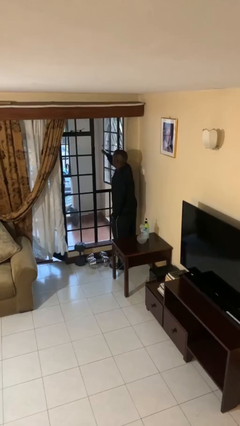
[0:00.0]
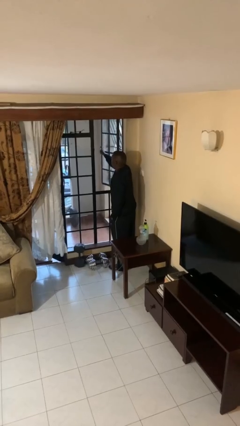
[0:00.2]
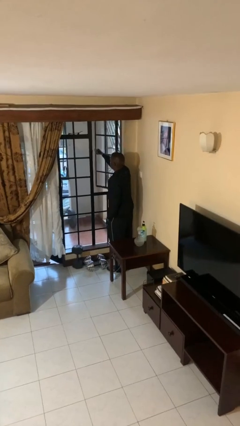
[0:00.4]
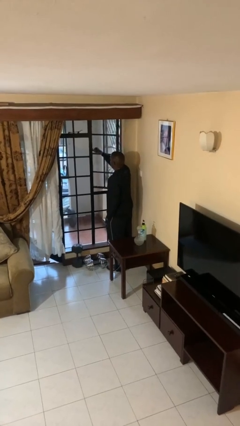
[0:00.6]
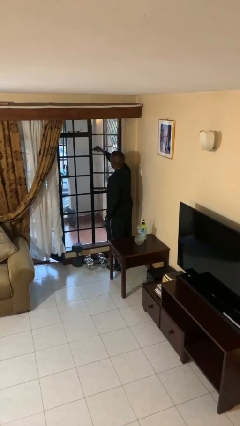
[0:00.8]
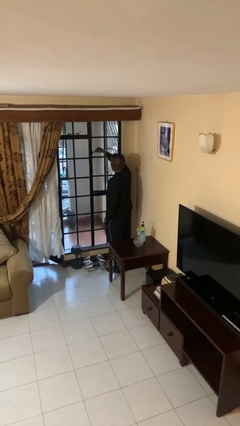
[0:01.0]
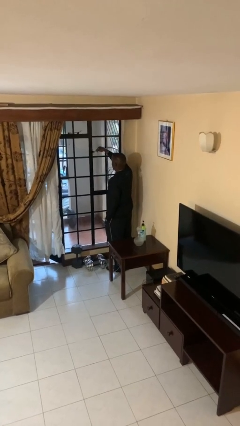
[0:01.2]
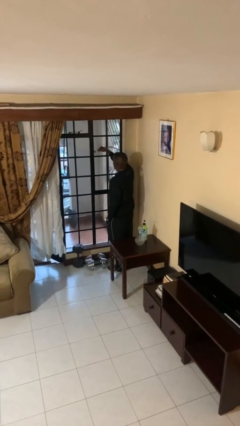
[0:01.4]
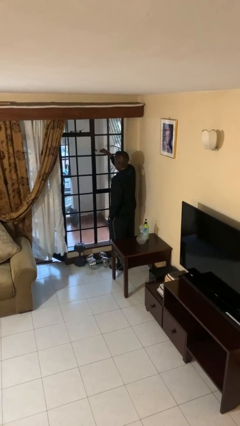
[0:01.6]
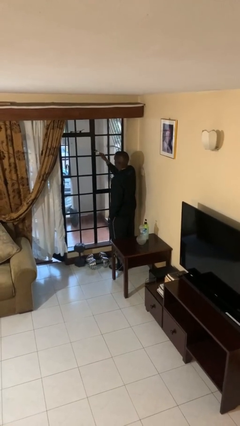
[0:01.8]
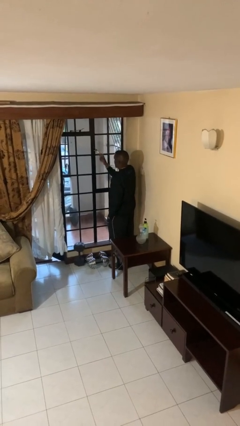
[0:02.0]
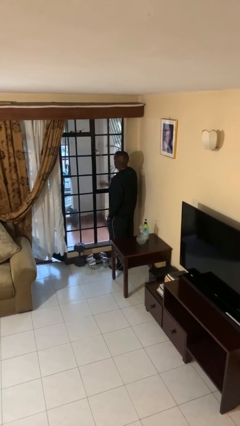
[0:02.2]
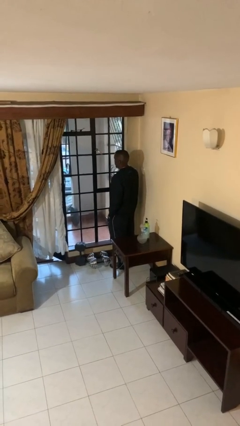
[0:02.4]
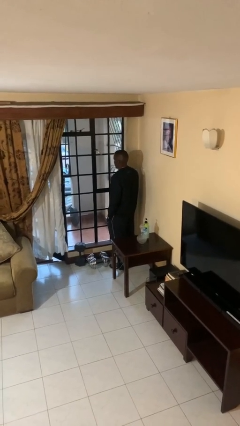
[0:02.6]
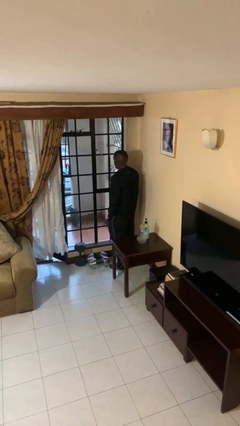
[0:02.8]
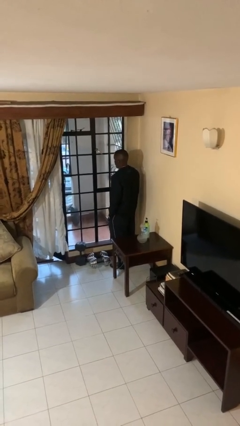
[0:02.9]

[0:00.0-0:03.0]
person closes home window

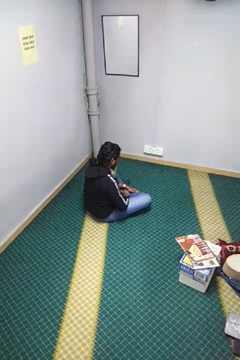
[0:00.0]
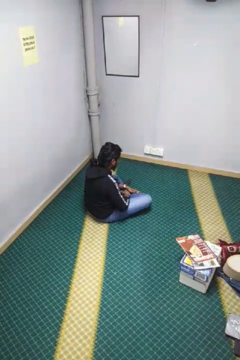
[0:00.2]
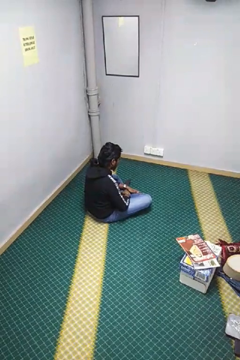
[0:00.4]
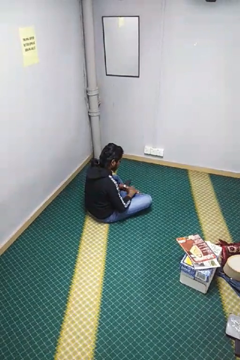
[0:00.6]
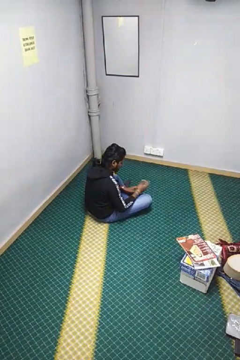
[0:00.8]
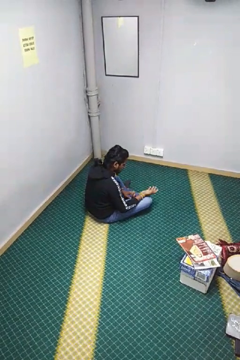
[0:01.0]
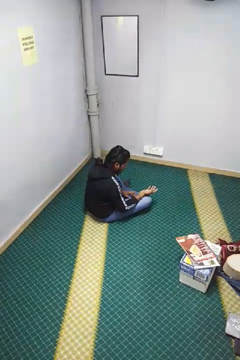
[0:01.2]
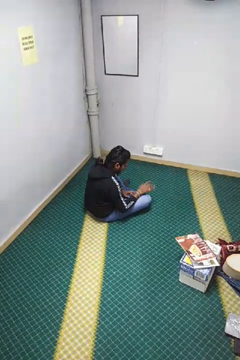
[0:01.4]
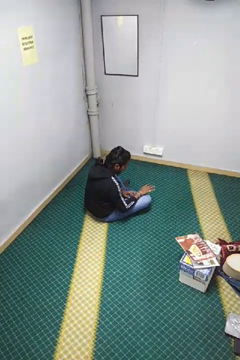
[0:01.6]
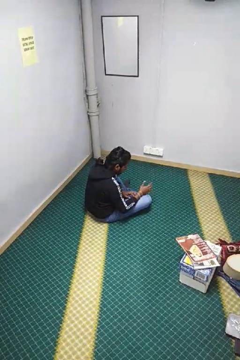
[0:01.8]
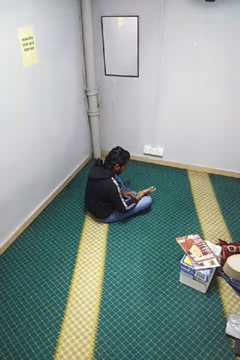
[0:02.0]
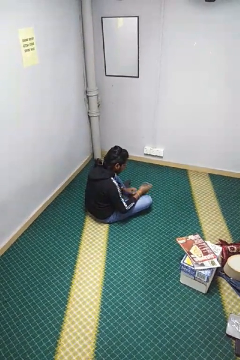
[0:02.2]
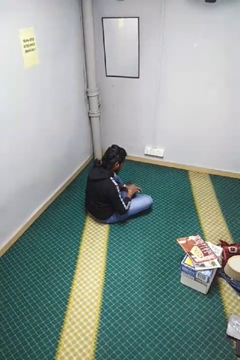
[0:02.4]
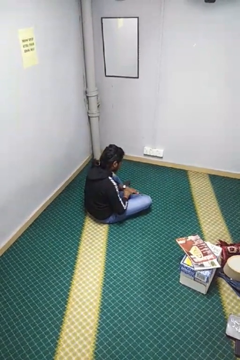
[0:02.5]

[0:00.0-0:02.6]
person looks at hands in lap

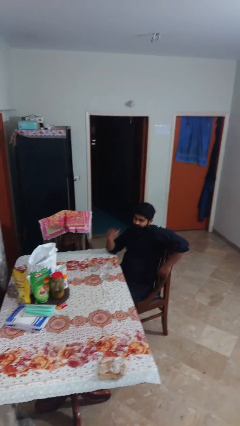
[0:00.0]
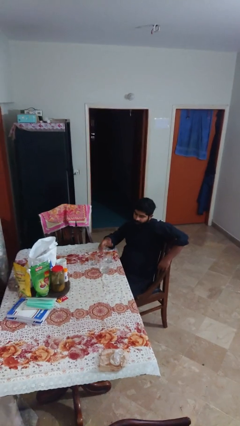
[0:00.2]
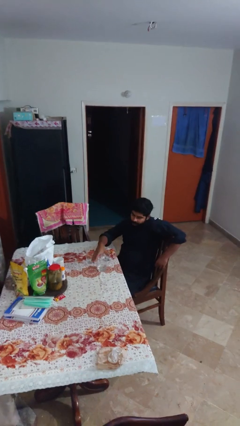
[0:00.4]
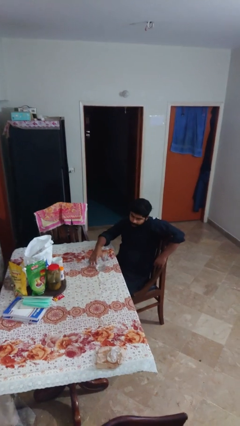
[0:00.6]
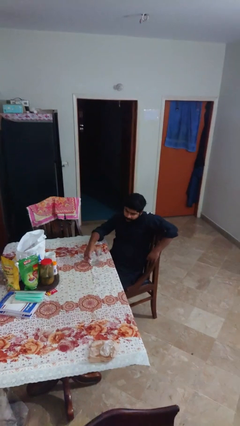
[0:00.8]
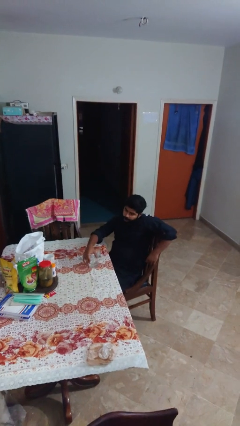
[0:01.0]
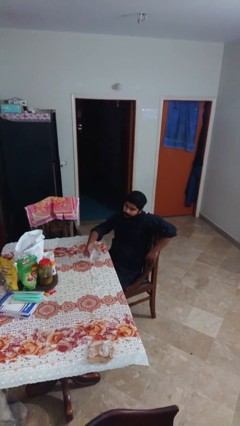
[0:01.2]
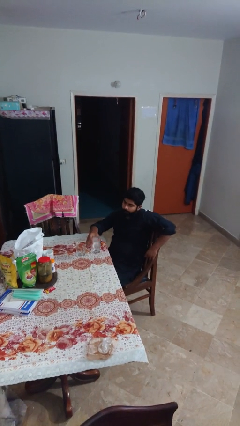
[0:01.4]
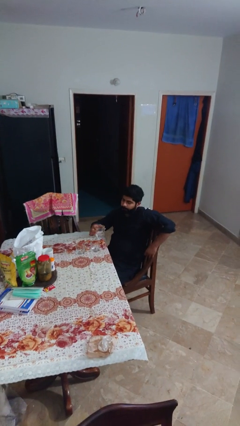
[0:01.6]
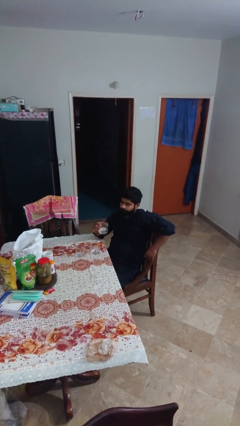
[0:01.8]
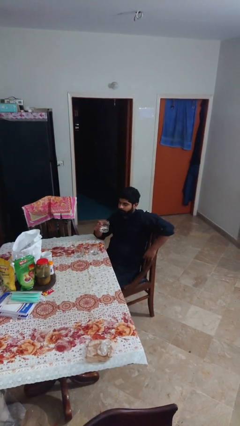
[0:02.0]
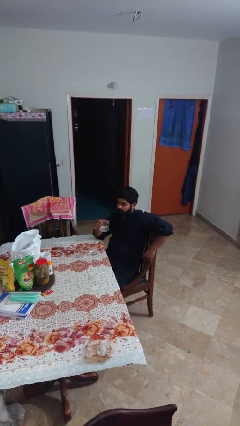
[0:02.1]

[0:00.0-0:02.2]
person picks up object from table

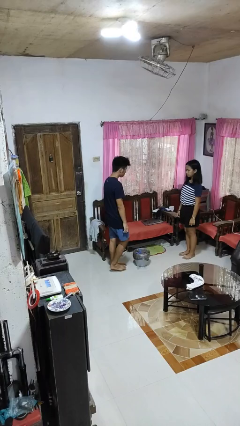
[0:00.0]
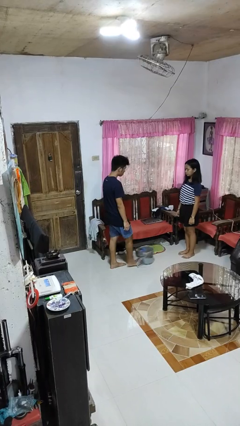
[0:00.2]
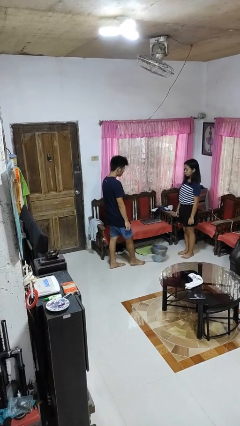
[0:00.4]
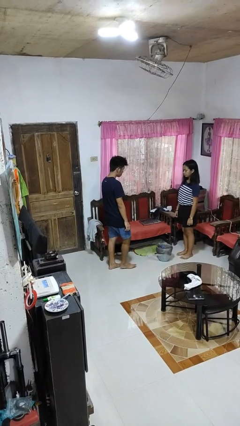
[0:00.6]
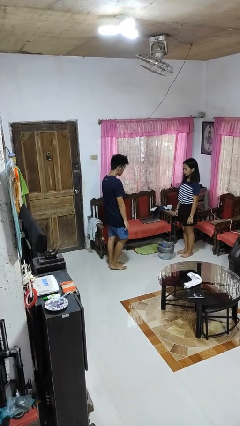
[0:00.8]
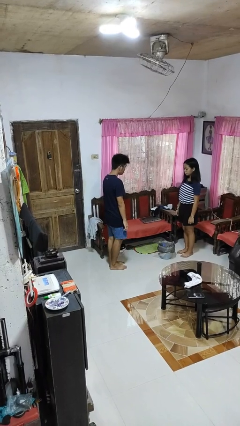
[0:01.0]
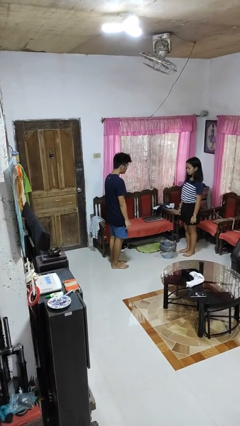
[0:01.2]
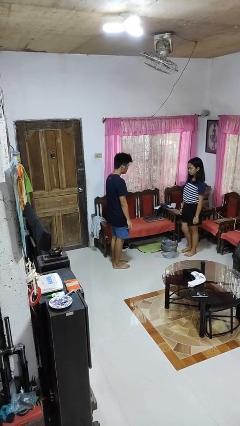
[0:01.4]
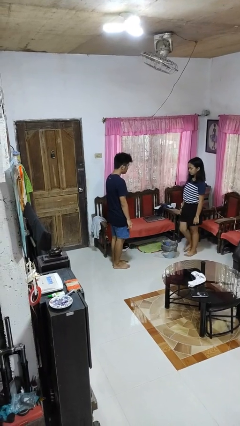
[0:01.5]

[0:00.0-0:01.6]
person kicks object to person

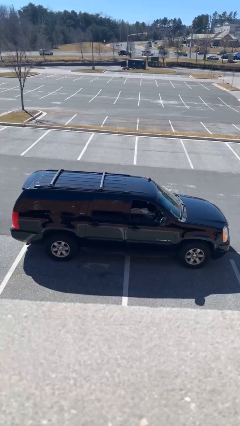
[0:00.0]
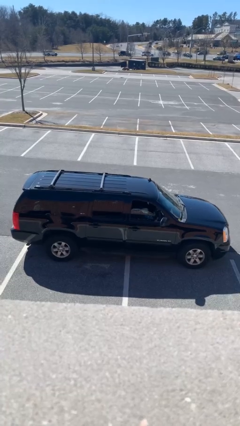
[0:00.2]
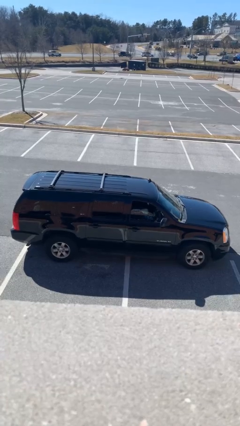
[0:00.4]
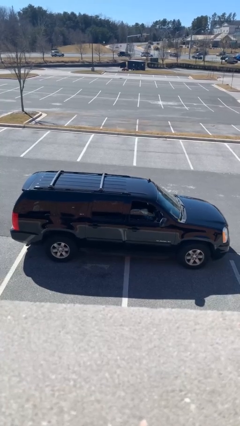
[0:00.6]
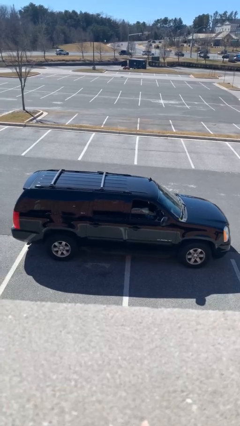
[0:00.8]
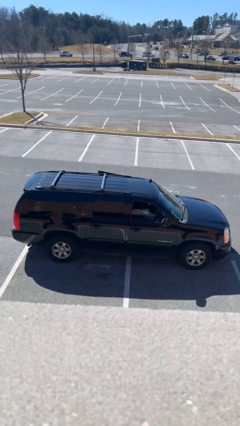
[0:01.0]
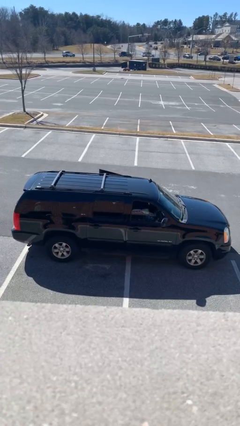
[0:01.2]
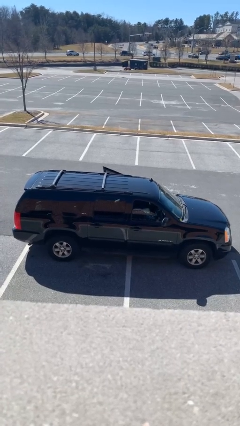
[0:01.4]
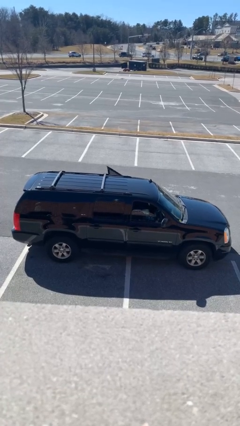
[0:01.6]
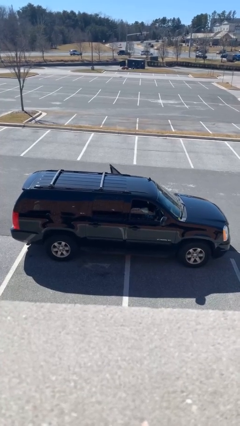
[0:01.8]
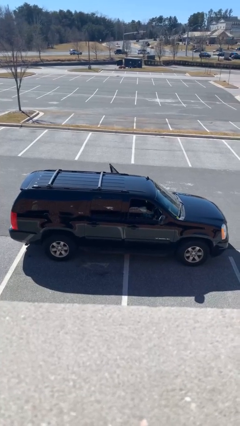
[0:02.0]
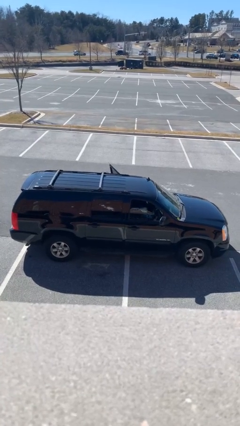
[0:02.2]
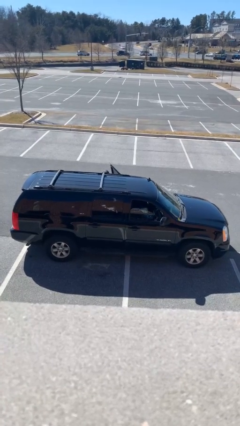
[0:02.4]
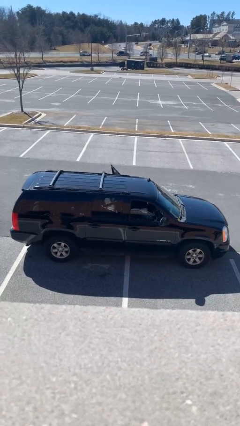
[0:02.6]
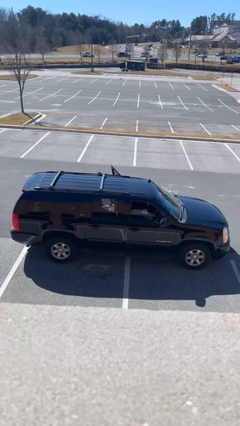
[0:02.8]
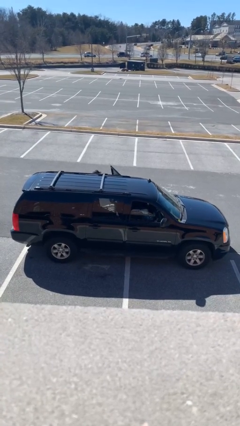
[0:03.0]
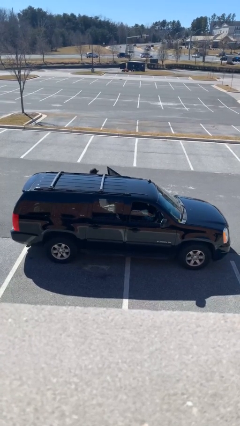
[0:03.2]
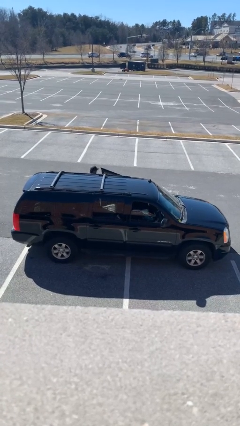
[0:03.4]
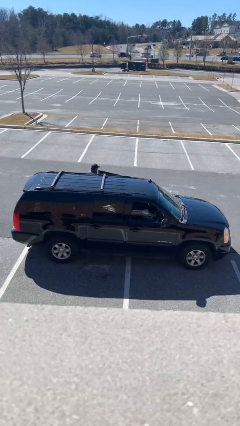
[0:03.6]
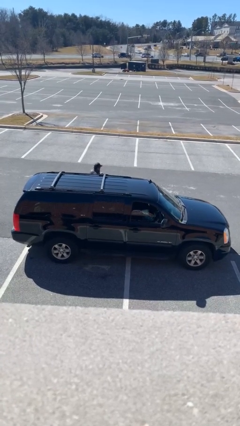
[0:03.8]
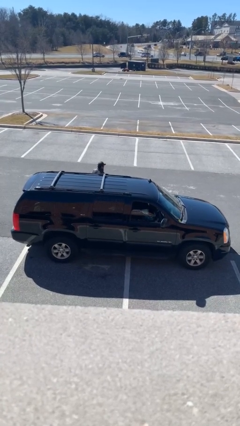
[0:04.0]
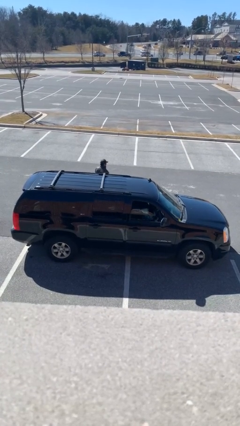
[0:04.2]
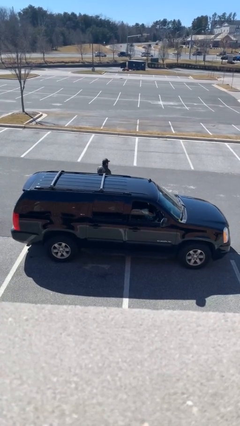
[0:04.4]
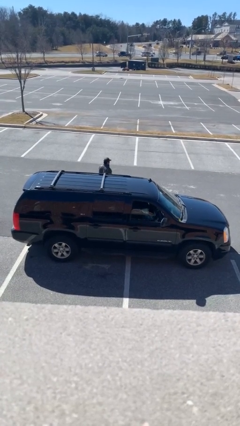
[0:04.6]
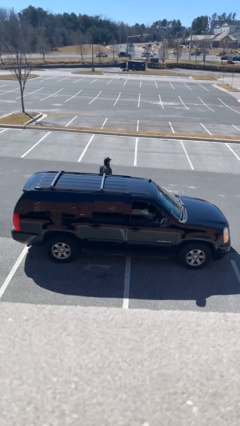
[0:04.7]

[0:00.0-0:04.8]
car drops off person

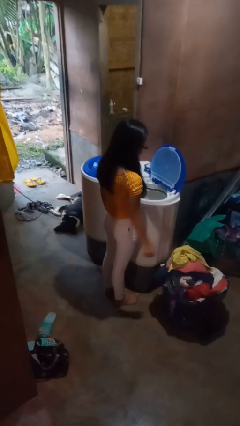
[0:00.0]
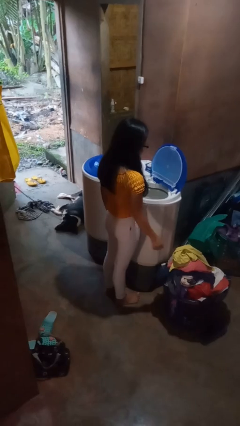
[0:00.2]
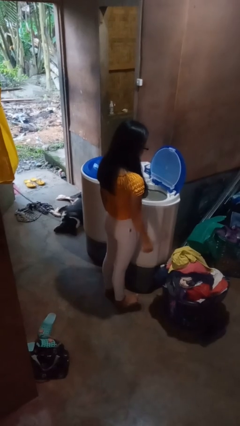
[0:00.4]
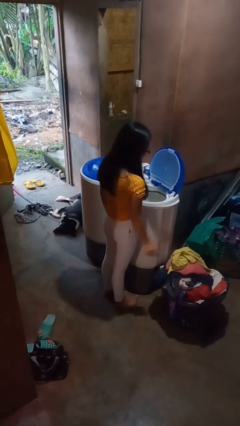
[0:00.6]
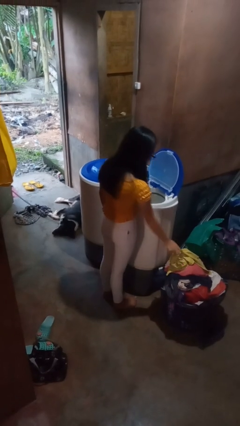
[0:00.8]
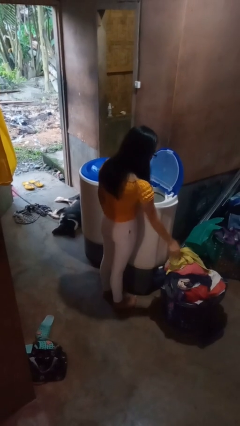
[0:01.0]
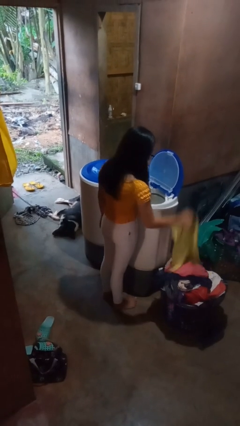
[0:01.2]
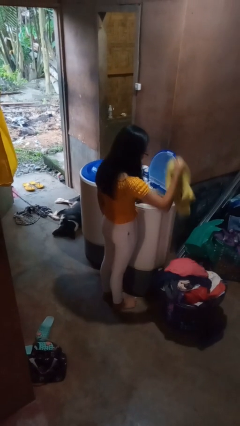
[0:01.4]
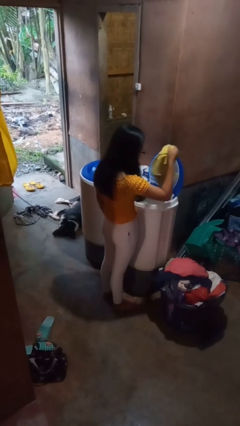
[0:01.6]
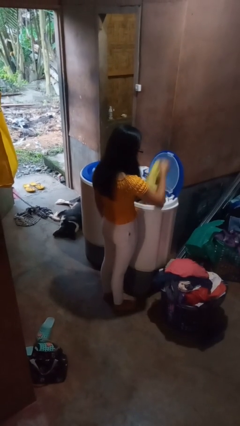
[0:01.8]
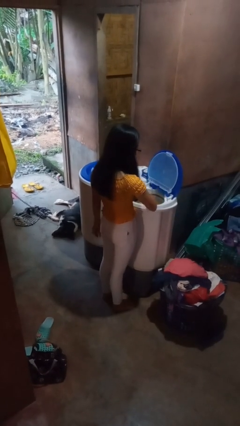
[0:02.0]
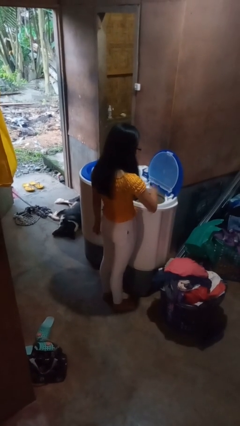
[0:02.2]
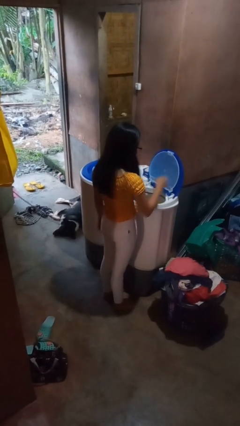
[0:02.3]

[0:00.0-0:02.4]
person loads dryer

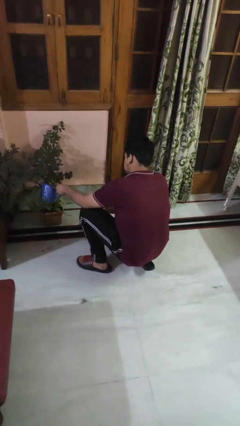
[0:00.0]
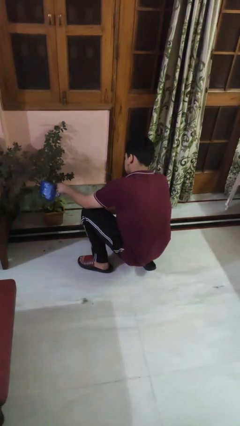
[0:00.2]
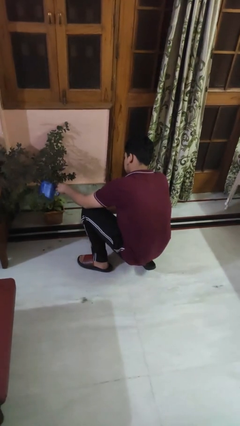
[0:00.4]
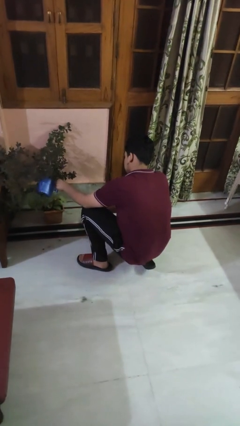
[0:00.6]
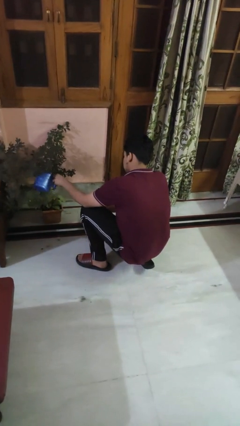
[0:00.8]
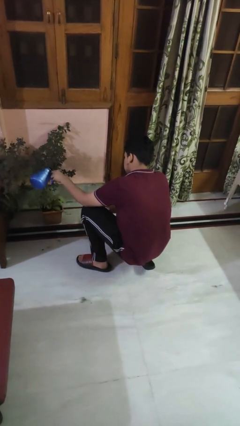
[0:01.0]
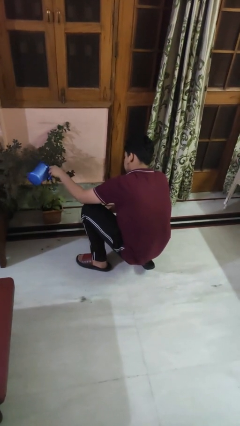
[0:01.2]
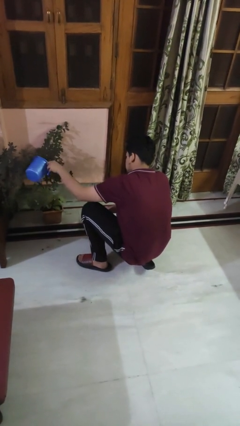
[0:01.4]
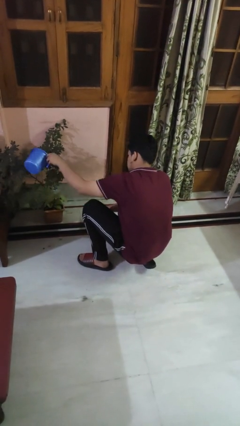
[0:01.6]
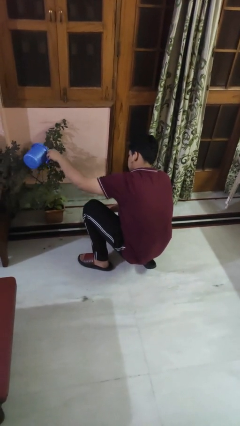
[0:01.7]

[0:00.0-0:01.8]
person waters houseplant
